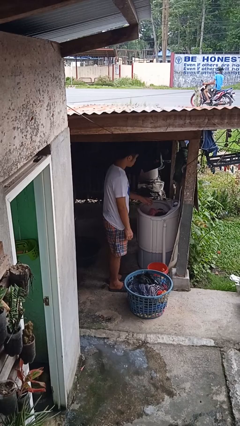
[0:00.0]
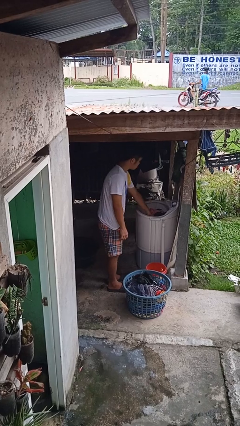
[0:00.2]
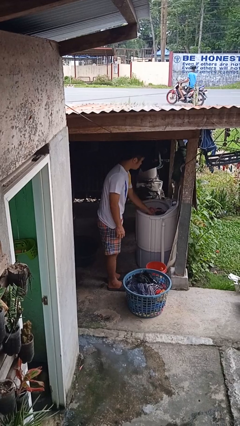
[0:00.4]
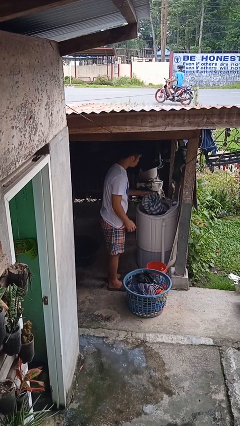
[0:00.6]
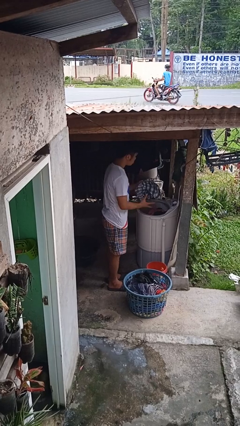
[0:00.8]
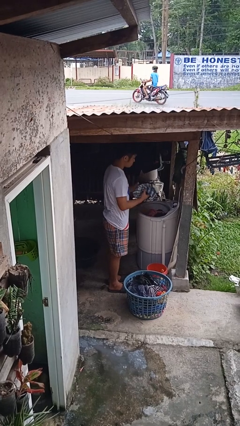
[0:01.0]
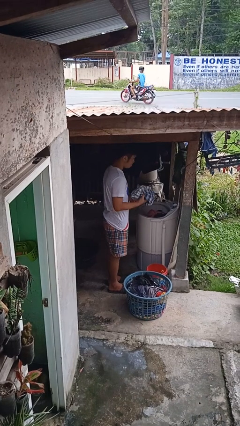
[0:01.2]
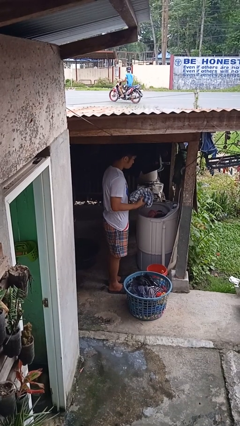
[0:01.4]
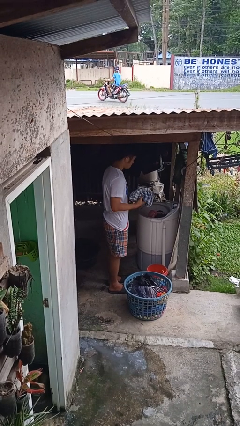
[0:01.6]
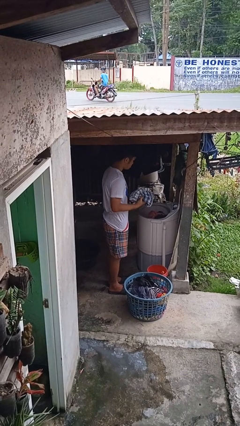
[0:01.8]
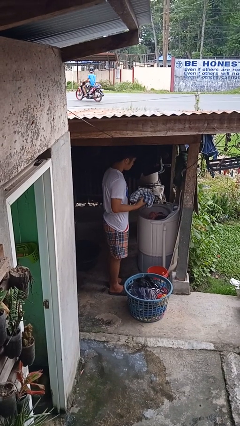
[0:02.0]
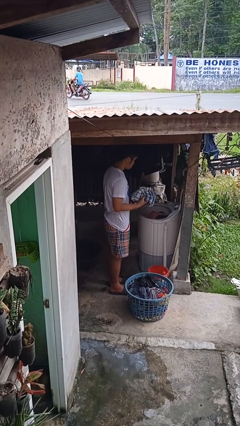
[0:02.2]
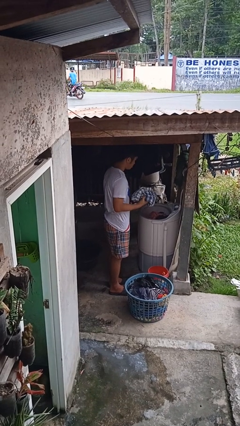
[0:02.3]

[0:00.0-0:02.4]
person unloads clotheswasher

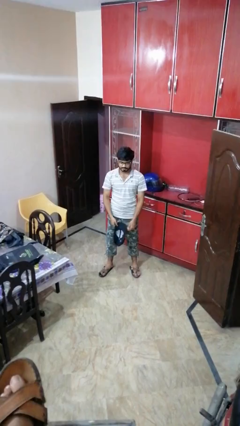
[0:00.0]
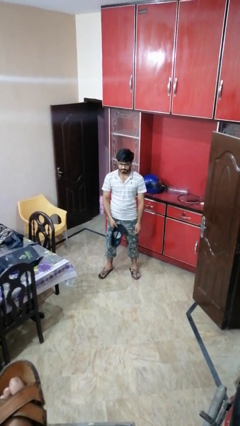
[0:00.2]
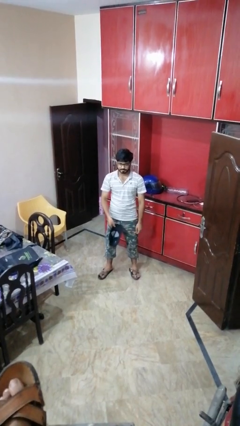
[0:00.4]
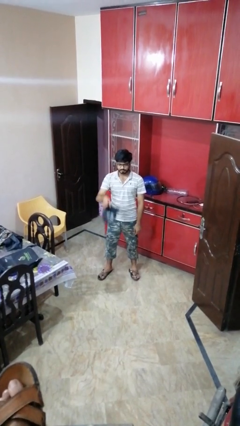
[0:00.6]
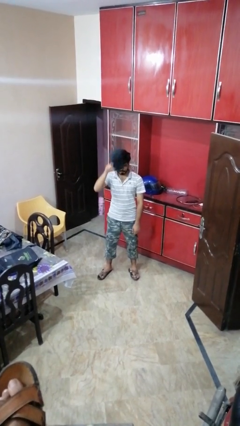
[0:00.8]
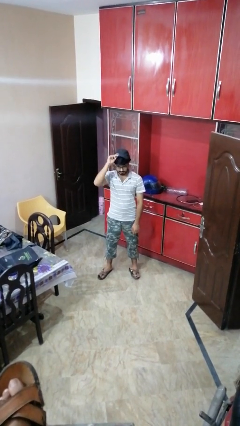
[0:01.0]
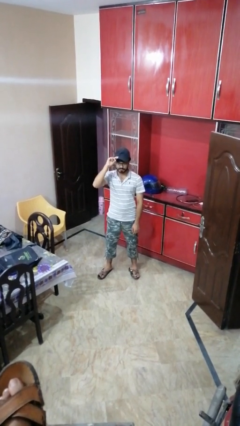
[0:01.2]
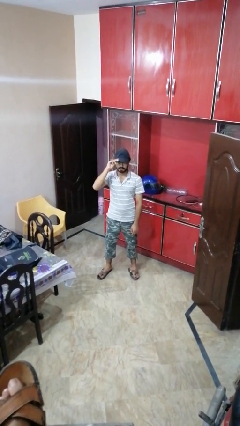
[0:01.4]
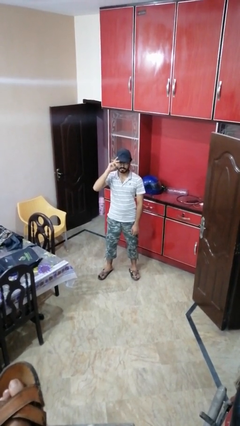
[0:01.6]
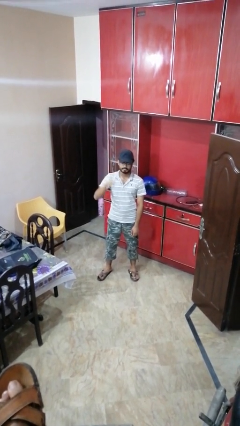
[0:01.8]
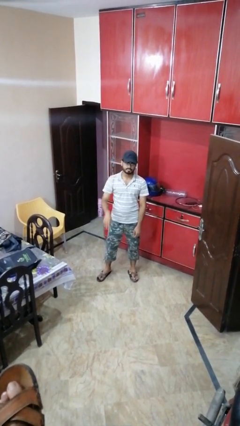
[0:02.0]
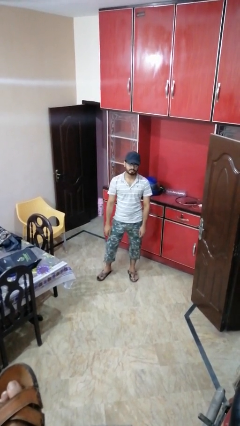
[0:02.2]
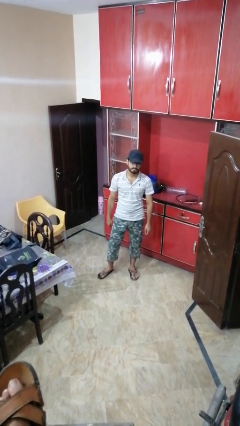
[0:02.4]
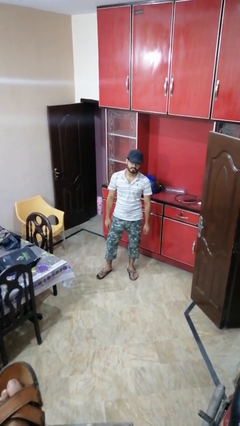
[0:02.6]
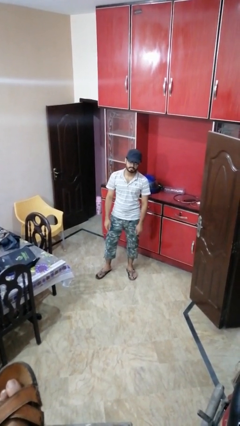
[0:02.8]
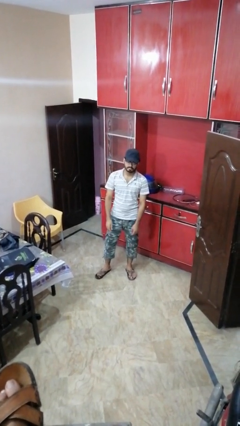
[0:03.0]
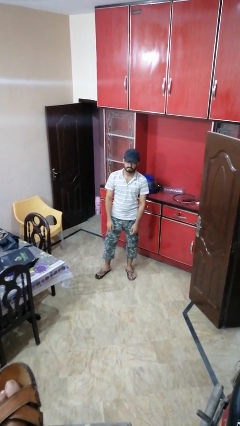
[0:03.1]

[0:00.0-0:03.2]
person puts on hat

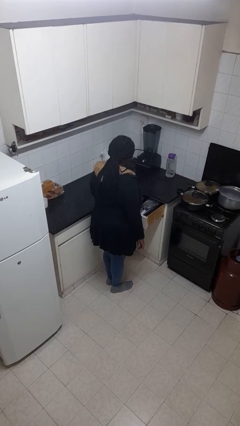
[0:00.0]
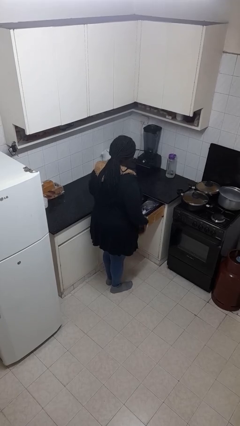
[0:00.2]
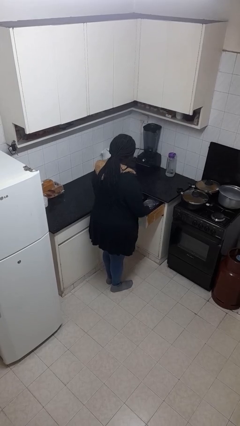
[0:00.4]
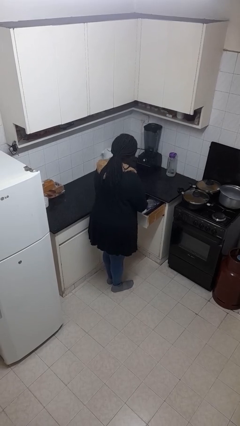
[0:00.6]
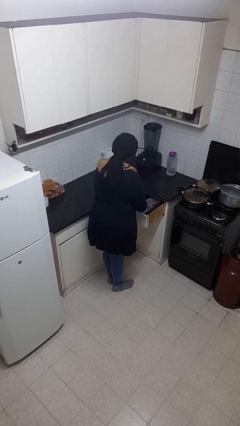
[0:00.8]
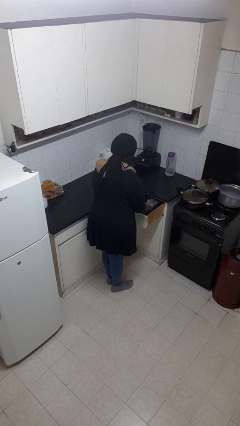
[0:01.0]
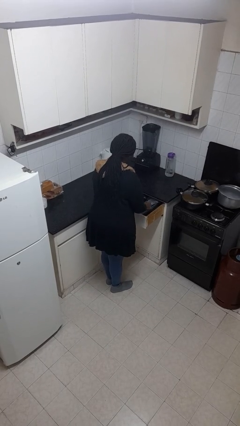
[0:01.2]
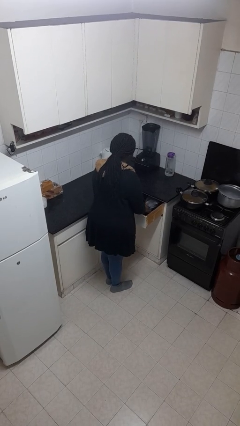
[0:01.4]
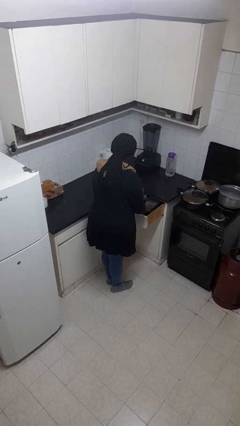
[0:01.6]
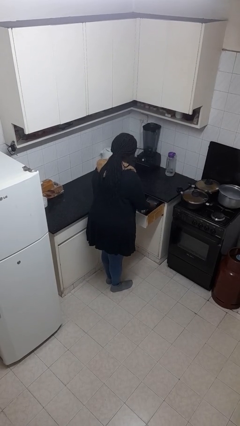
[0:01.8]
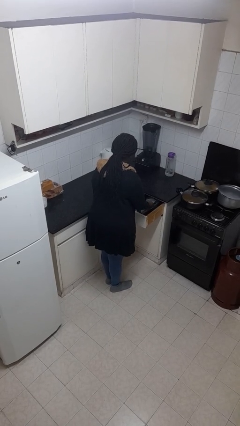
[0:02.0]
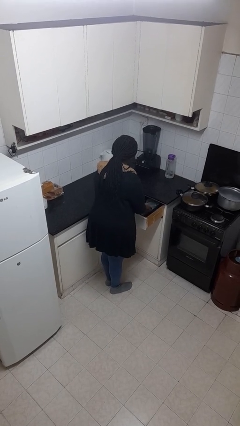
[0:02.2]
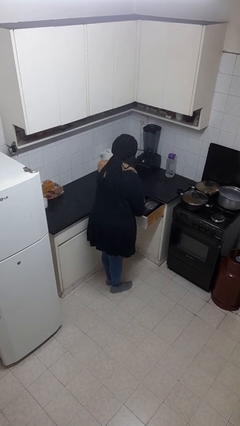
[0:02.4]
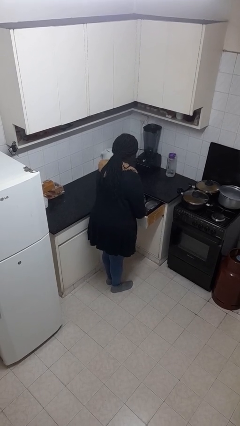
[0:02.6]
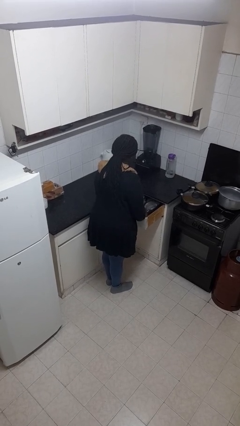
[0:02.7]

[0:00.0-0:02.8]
person searches in kitchen drawer

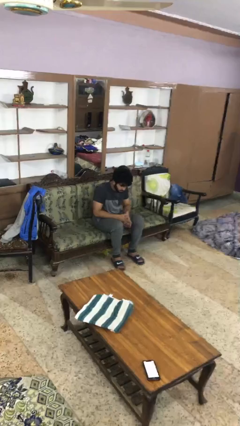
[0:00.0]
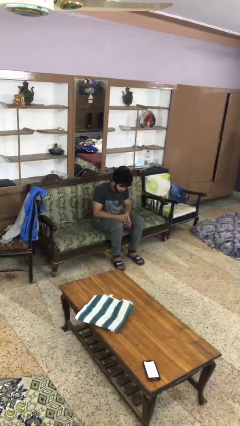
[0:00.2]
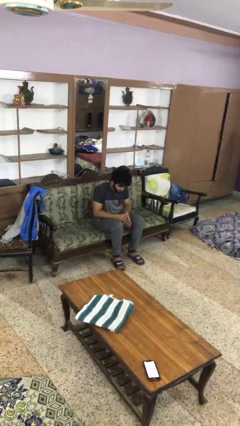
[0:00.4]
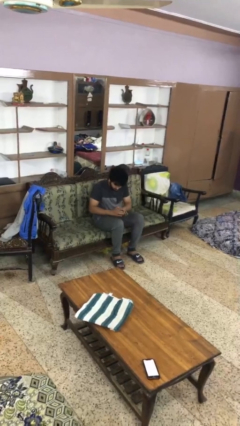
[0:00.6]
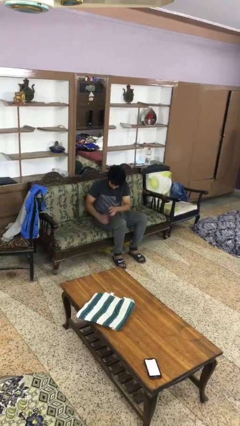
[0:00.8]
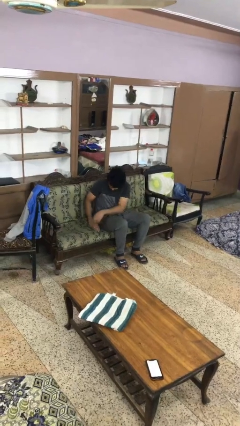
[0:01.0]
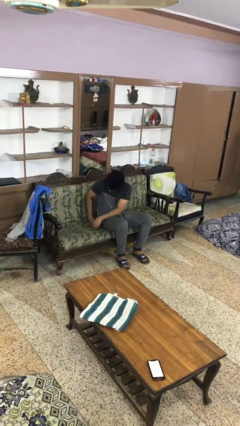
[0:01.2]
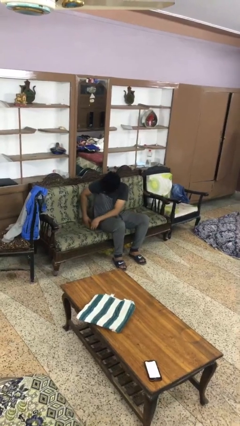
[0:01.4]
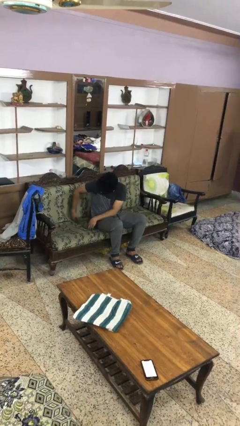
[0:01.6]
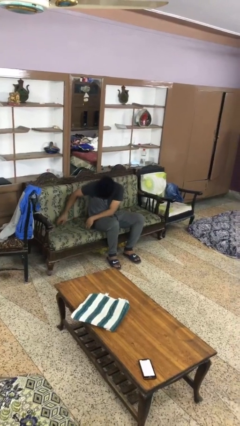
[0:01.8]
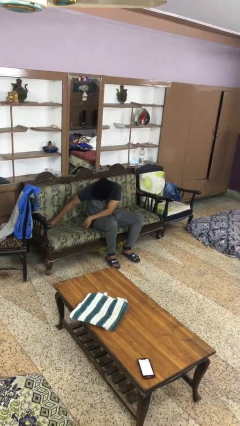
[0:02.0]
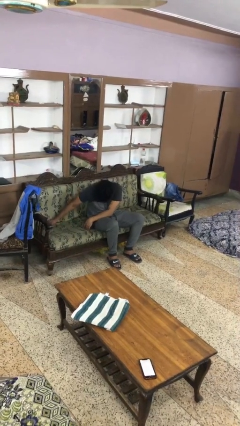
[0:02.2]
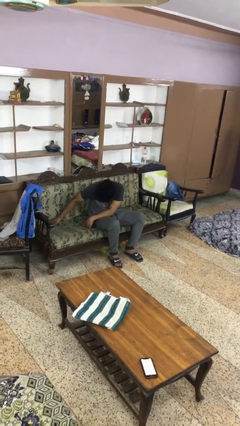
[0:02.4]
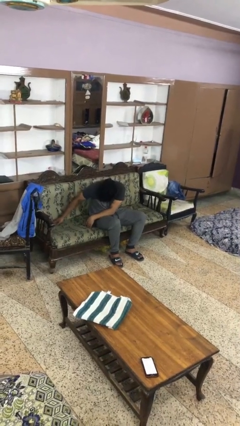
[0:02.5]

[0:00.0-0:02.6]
person searches in couch

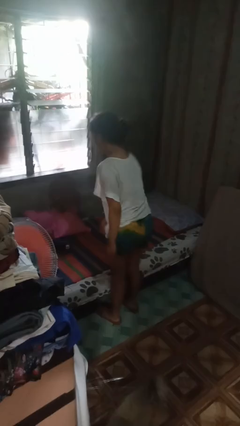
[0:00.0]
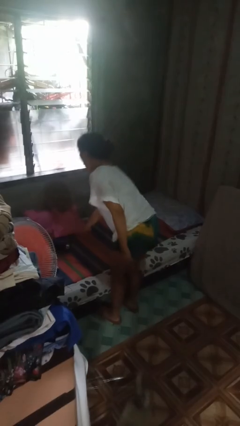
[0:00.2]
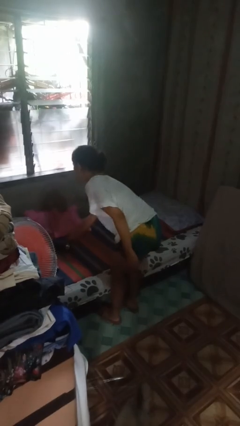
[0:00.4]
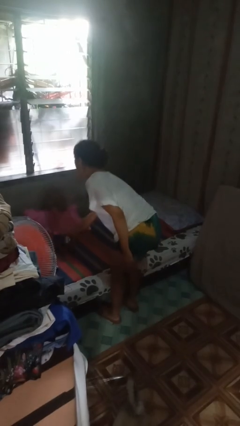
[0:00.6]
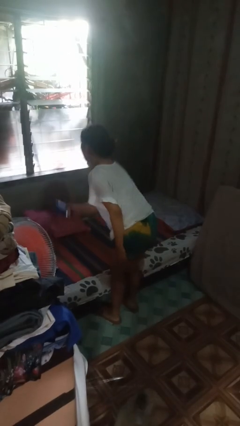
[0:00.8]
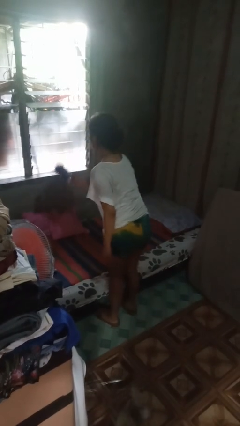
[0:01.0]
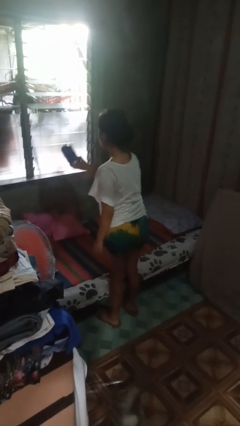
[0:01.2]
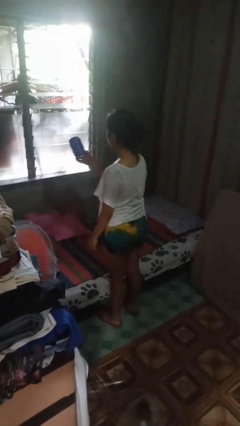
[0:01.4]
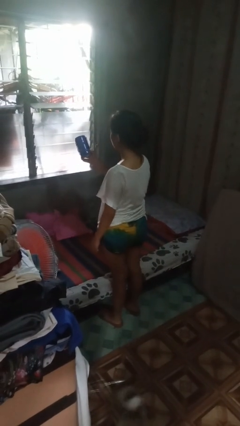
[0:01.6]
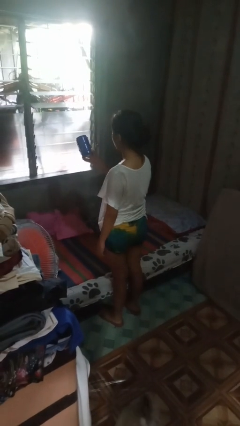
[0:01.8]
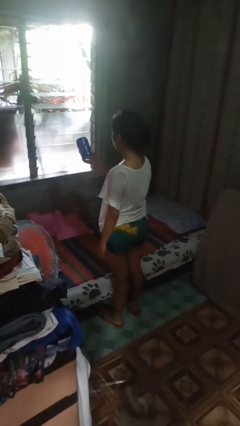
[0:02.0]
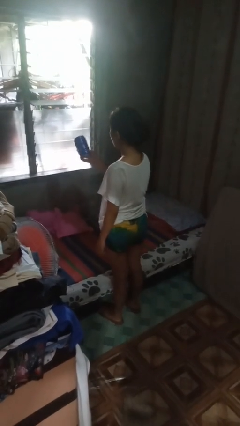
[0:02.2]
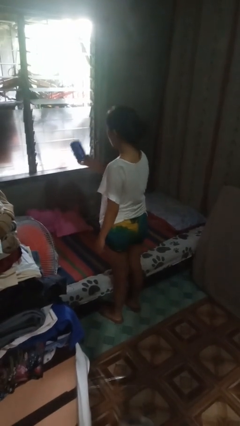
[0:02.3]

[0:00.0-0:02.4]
person picks up object from bed

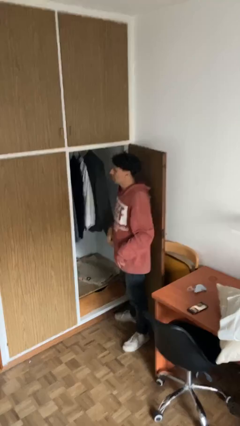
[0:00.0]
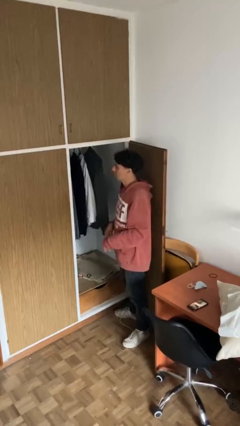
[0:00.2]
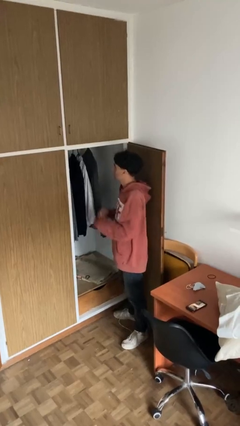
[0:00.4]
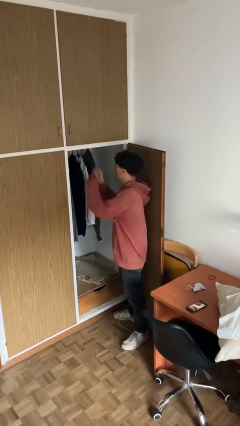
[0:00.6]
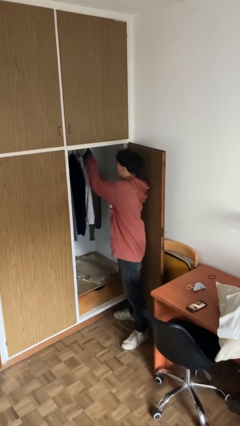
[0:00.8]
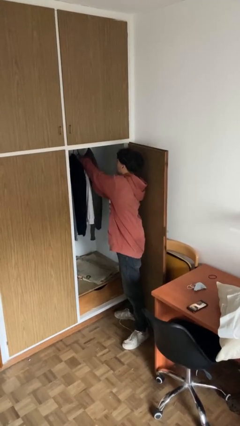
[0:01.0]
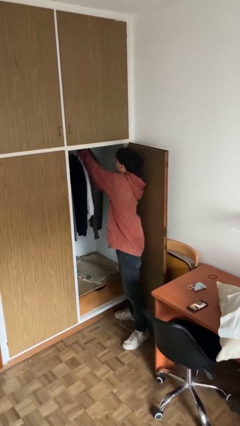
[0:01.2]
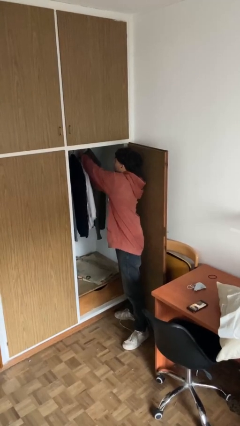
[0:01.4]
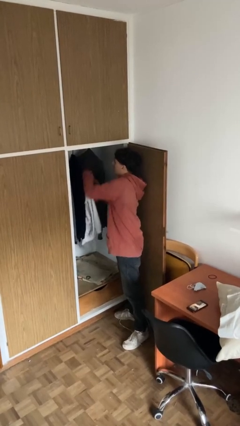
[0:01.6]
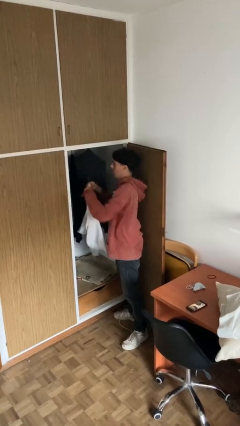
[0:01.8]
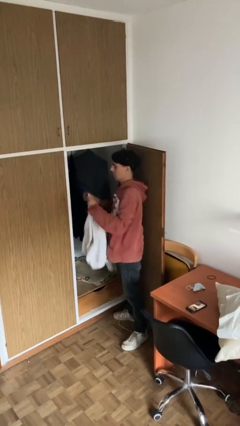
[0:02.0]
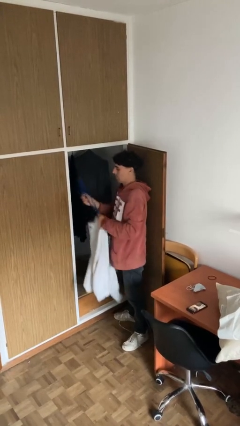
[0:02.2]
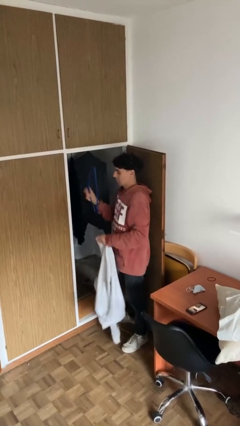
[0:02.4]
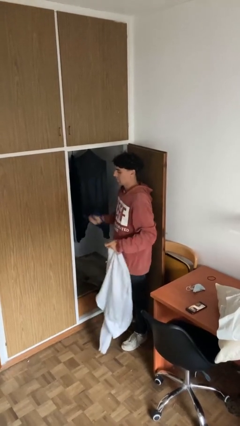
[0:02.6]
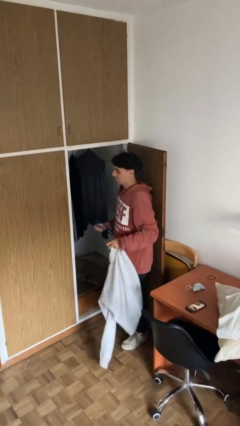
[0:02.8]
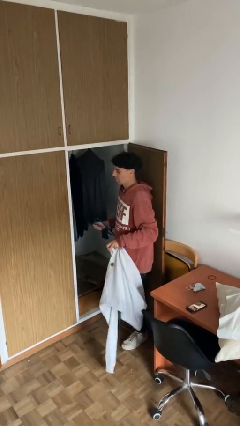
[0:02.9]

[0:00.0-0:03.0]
person takes clothes from closet

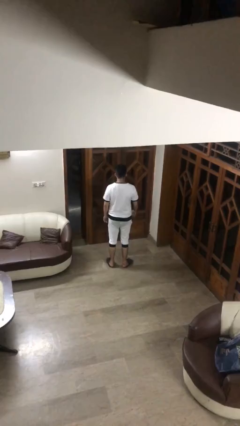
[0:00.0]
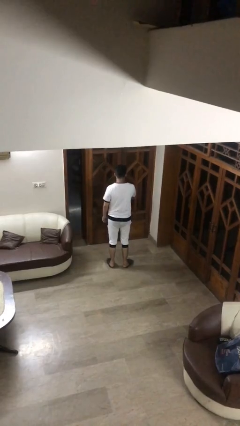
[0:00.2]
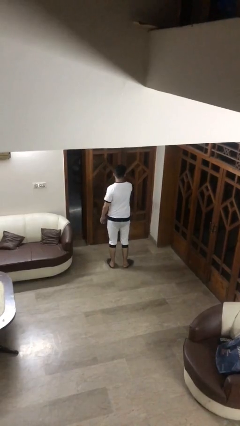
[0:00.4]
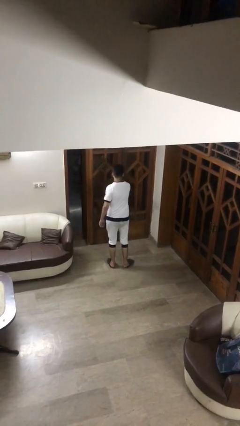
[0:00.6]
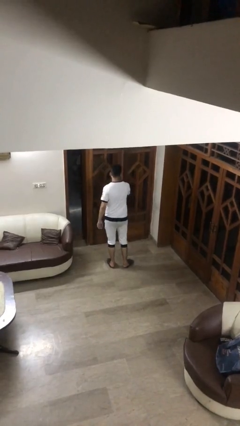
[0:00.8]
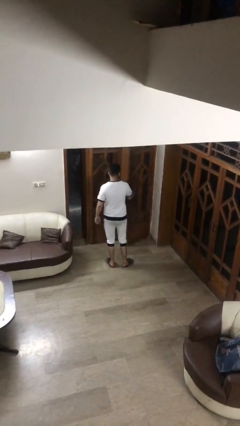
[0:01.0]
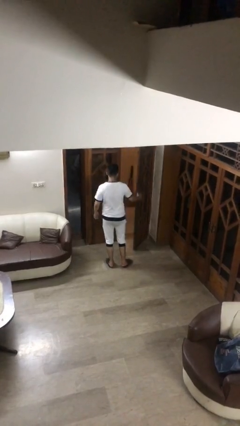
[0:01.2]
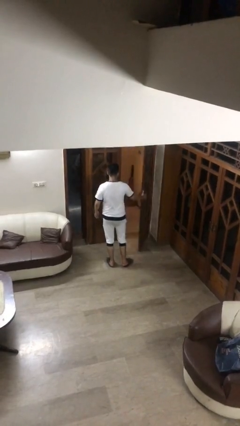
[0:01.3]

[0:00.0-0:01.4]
person opens facility door
